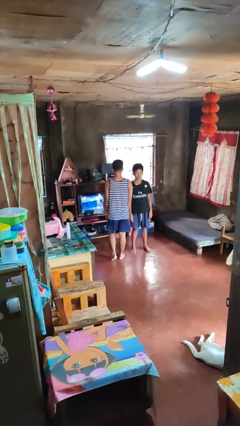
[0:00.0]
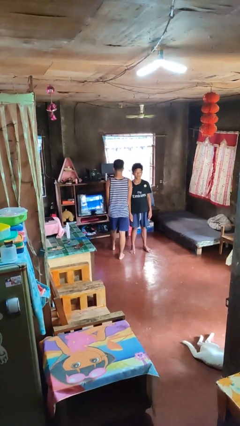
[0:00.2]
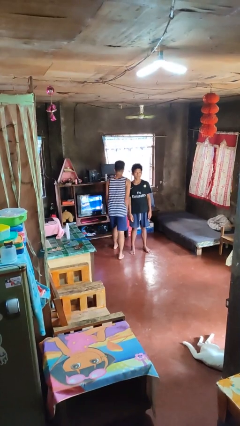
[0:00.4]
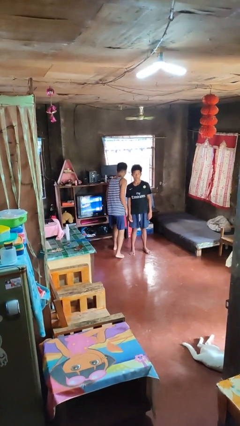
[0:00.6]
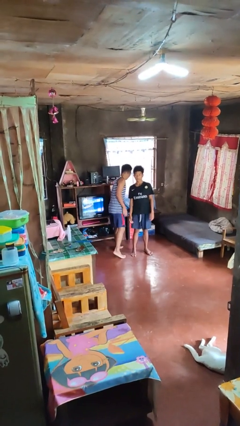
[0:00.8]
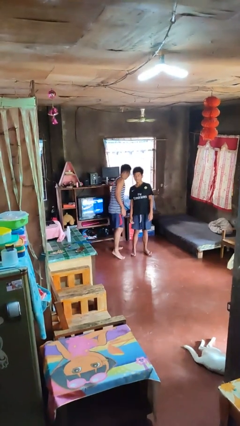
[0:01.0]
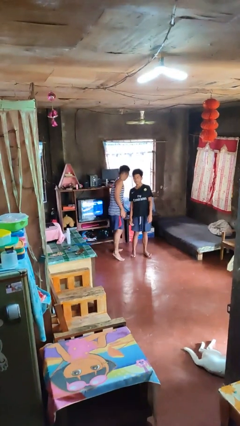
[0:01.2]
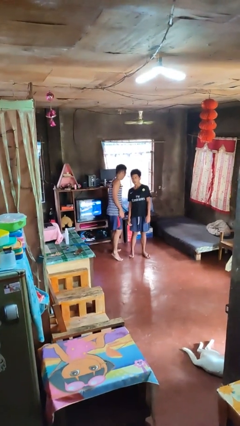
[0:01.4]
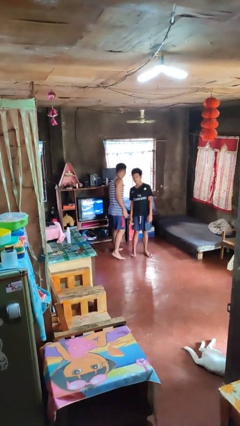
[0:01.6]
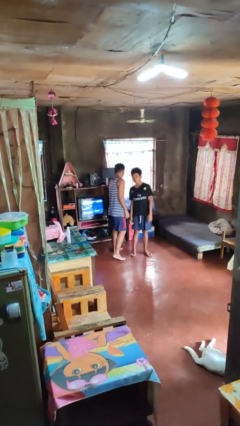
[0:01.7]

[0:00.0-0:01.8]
person bumps into person

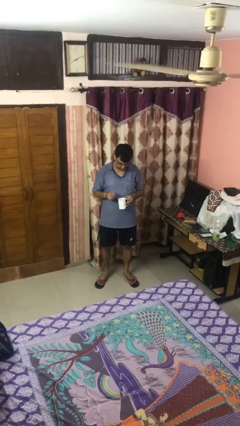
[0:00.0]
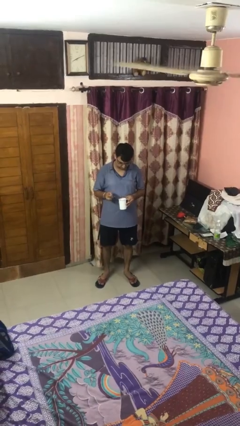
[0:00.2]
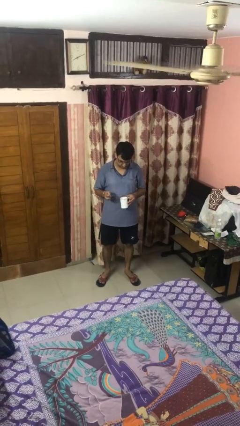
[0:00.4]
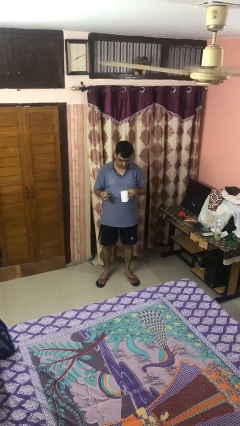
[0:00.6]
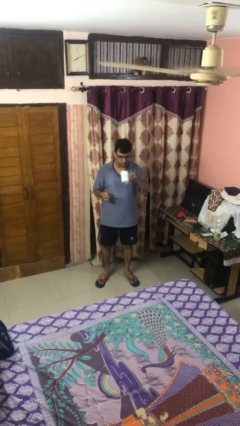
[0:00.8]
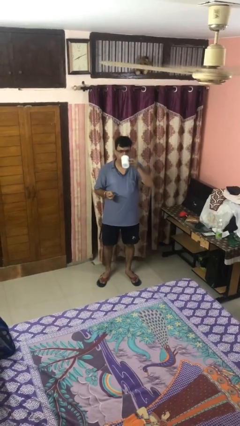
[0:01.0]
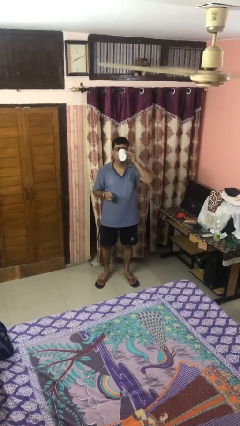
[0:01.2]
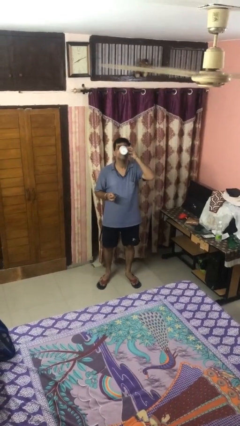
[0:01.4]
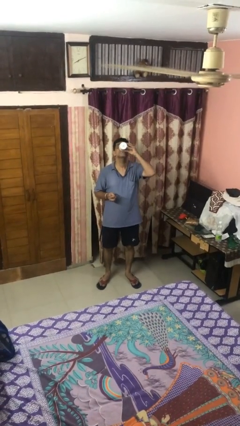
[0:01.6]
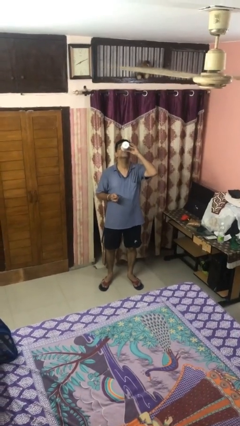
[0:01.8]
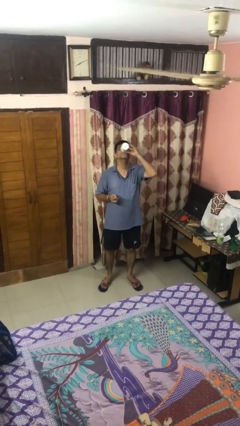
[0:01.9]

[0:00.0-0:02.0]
person drinks from mug

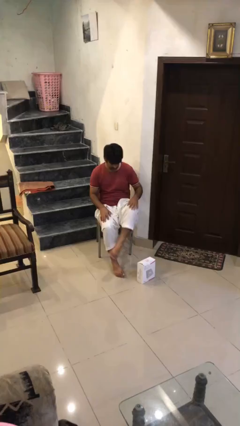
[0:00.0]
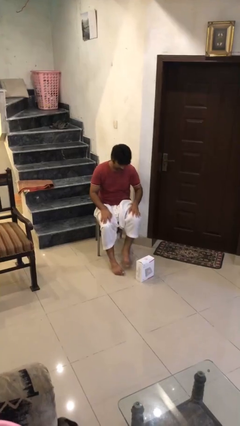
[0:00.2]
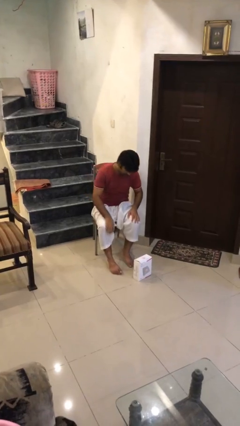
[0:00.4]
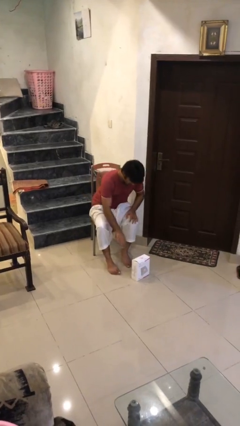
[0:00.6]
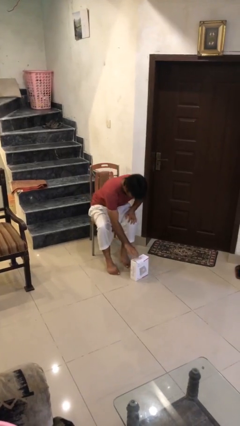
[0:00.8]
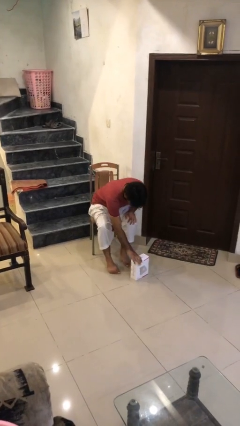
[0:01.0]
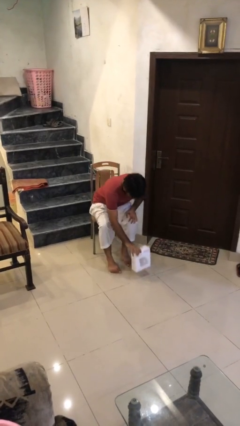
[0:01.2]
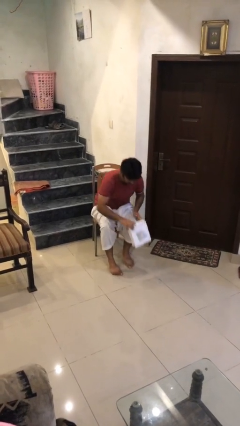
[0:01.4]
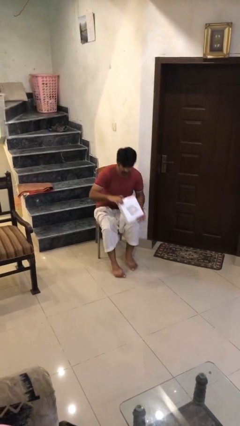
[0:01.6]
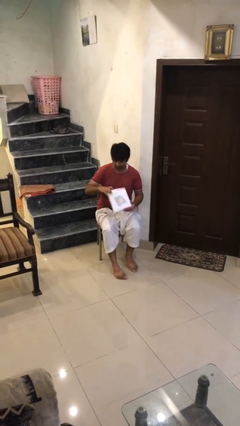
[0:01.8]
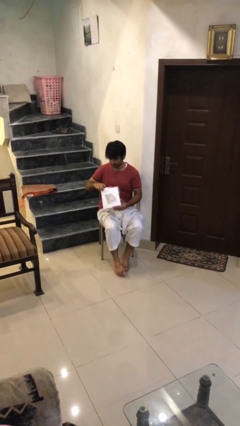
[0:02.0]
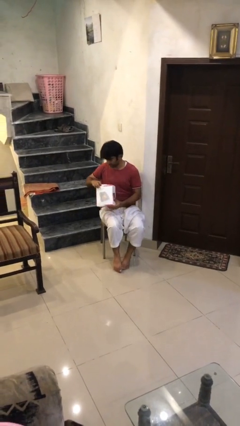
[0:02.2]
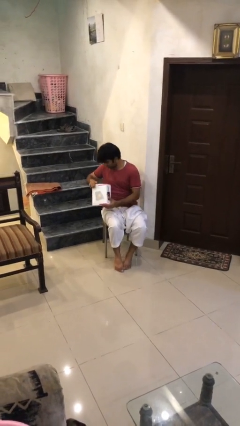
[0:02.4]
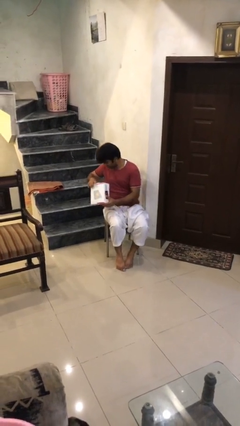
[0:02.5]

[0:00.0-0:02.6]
person picks up object from floor

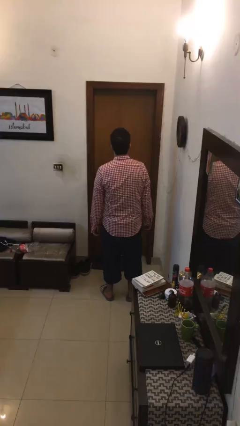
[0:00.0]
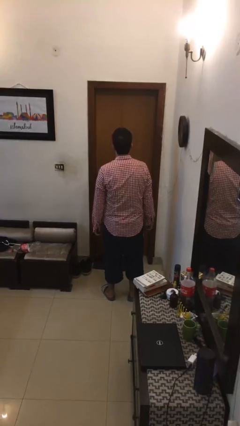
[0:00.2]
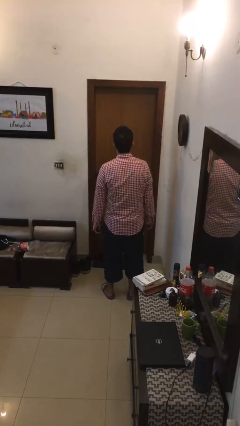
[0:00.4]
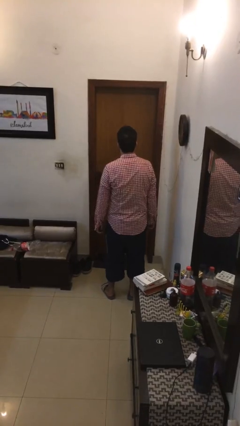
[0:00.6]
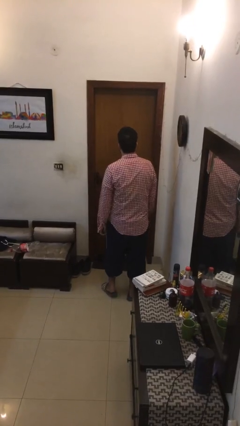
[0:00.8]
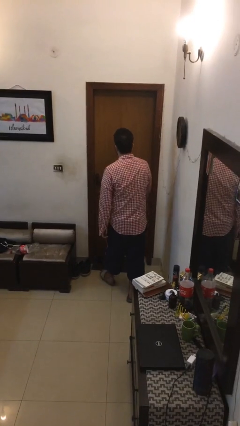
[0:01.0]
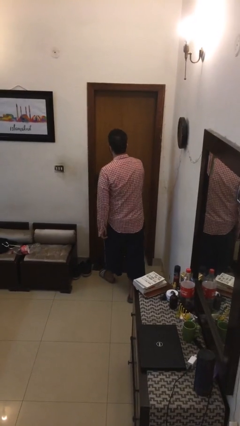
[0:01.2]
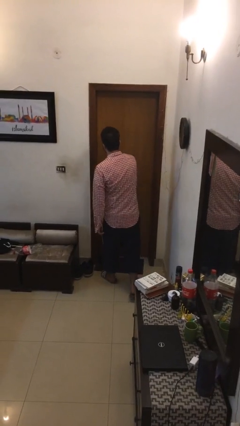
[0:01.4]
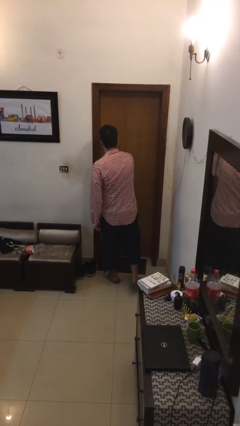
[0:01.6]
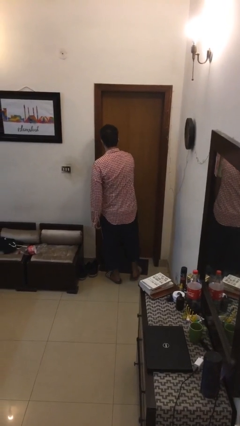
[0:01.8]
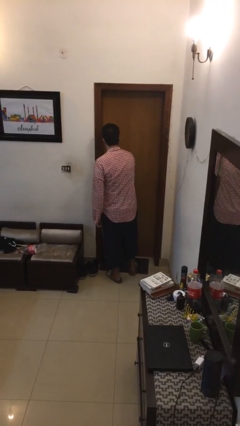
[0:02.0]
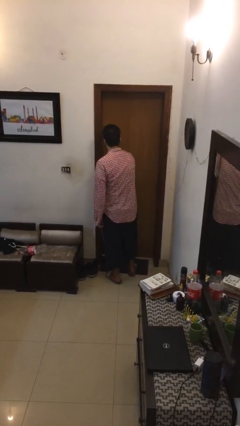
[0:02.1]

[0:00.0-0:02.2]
person opens facility door

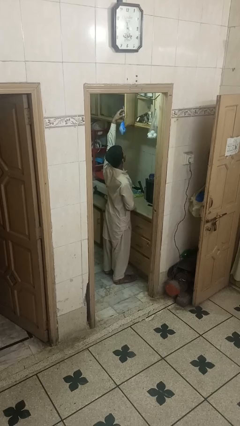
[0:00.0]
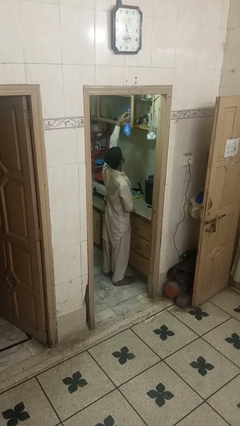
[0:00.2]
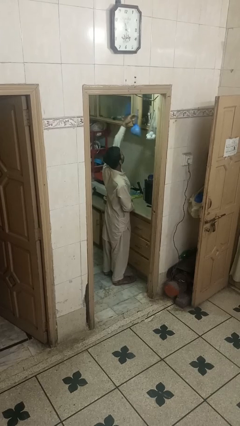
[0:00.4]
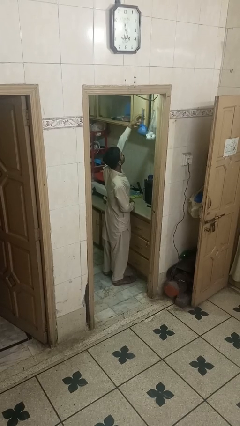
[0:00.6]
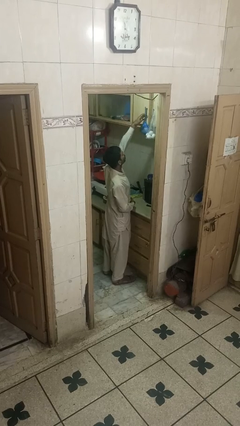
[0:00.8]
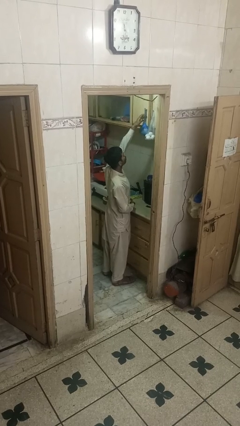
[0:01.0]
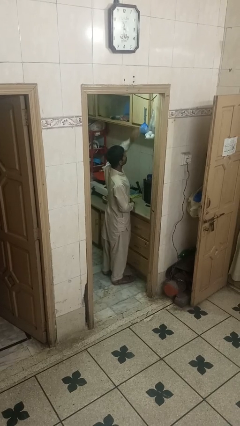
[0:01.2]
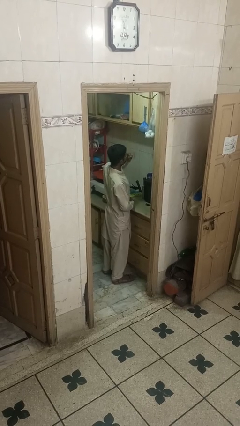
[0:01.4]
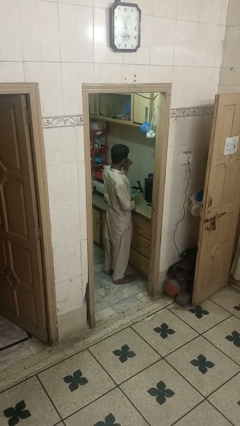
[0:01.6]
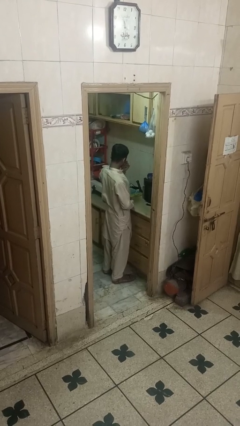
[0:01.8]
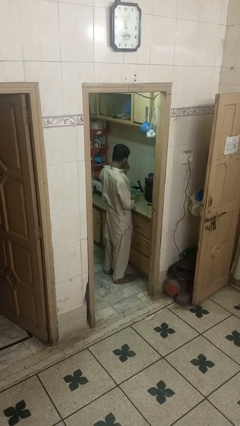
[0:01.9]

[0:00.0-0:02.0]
person closes cabinet

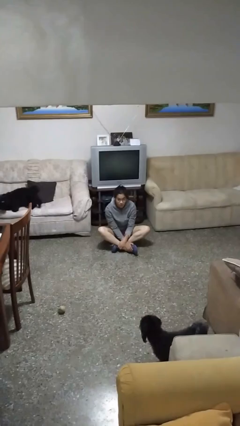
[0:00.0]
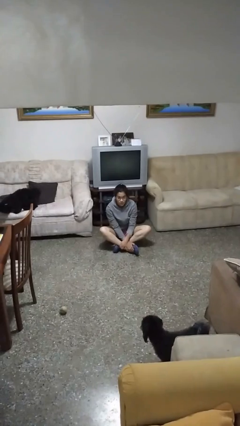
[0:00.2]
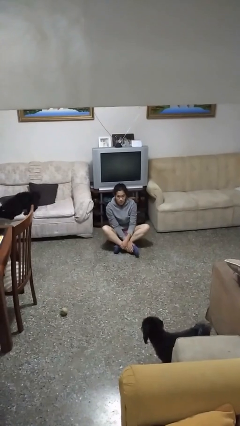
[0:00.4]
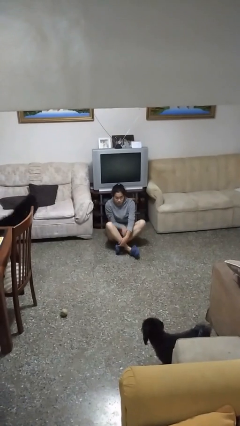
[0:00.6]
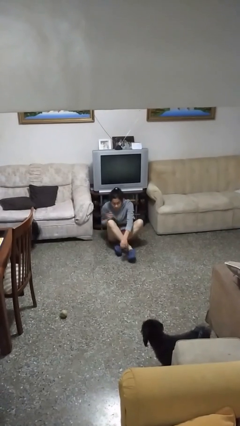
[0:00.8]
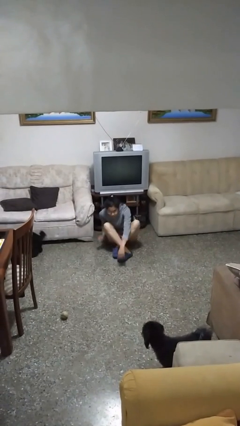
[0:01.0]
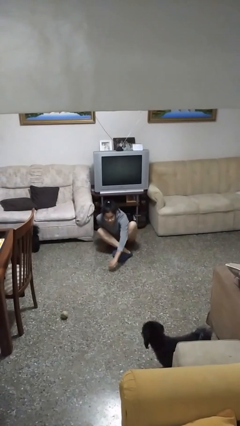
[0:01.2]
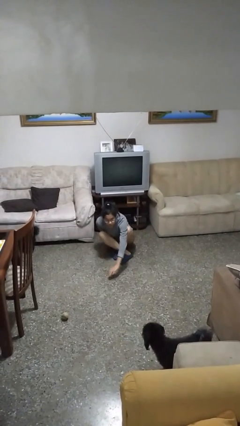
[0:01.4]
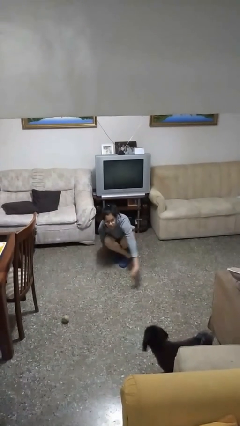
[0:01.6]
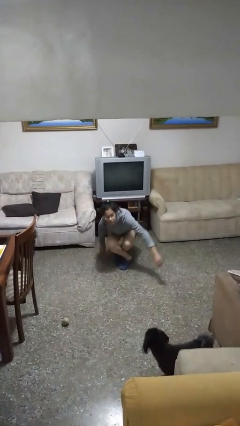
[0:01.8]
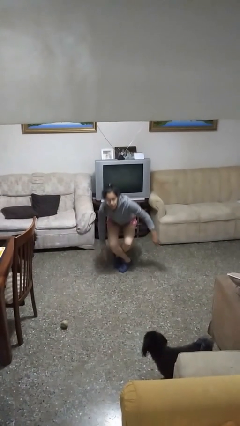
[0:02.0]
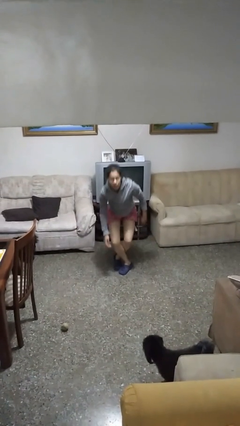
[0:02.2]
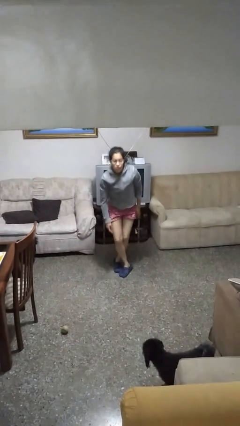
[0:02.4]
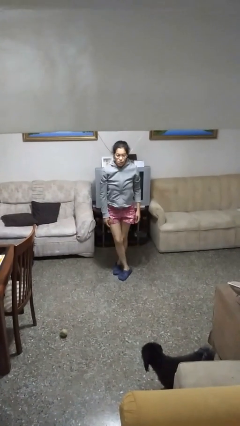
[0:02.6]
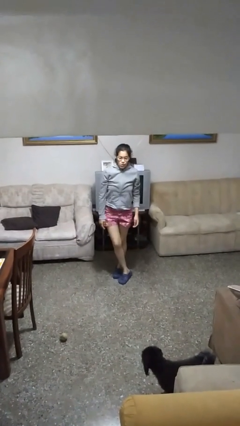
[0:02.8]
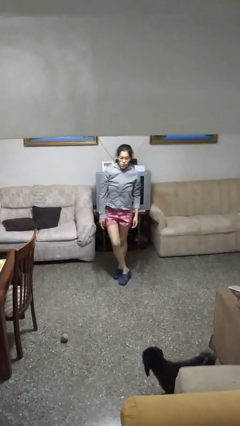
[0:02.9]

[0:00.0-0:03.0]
person stands up from floor

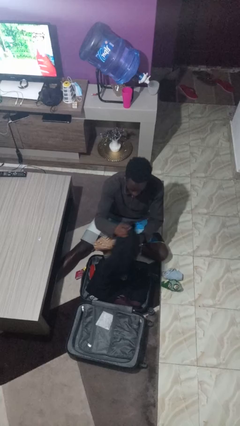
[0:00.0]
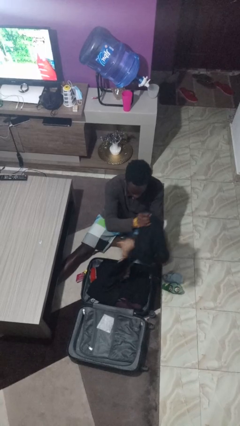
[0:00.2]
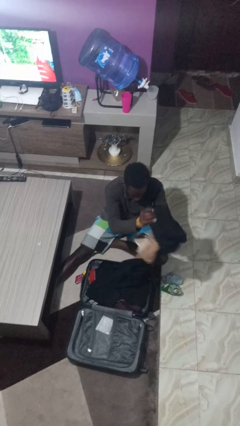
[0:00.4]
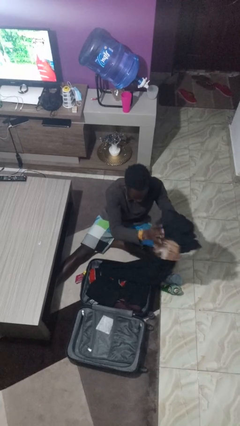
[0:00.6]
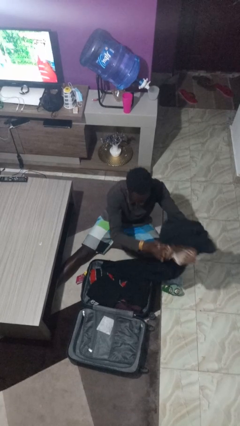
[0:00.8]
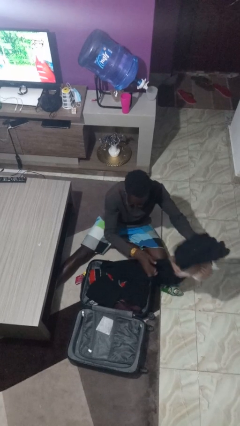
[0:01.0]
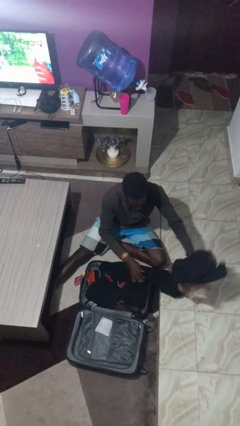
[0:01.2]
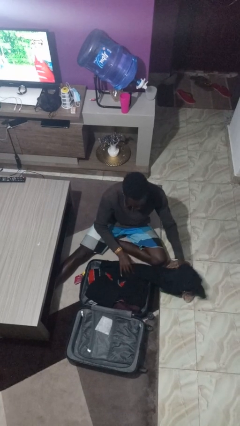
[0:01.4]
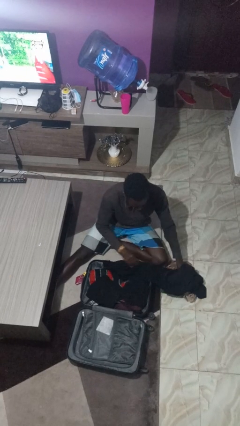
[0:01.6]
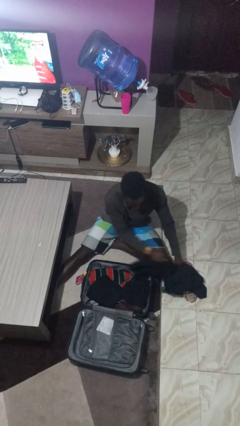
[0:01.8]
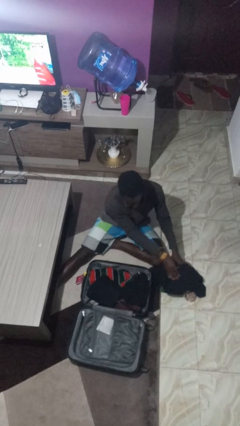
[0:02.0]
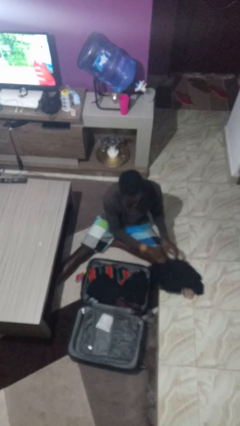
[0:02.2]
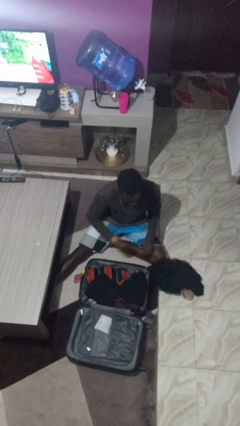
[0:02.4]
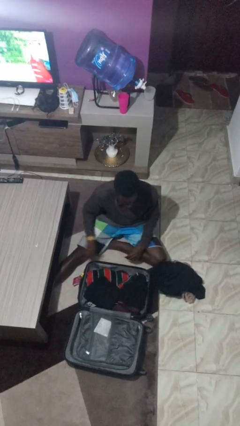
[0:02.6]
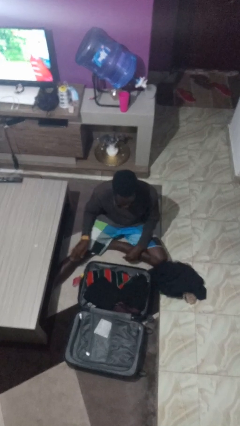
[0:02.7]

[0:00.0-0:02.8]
person unloads clothes from suitcase

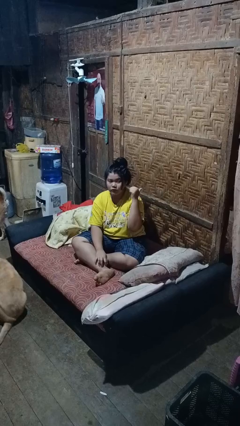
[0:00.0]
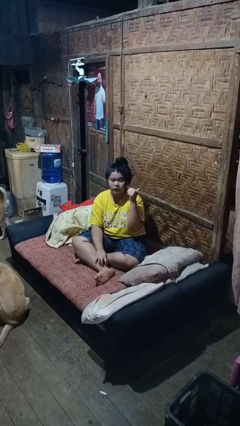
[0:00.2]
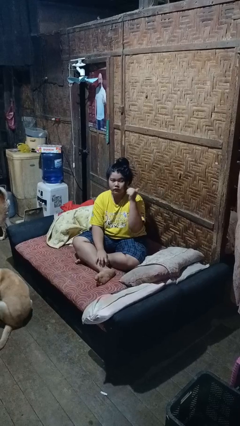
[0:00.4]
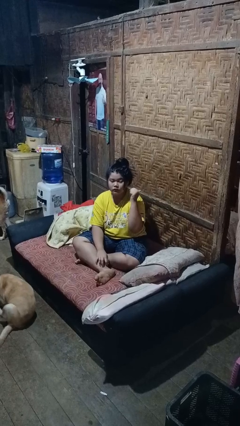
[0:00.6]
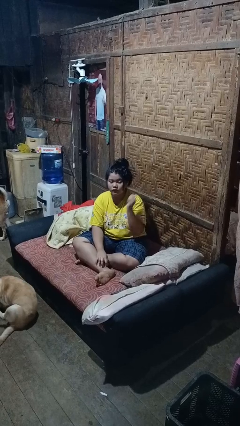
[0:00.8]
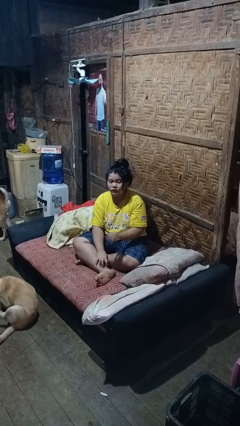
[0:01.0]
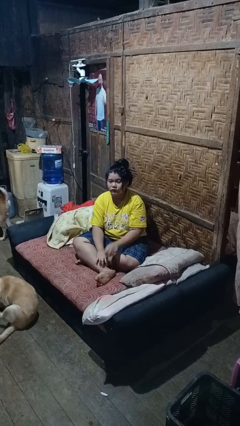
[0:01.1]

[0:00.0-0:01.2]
person gestures behind me
